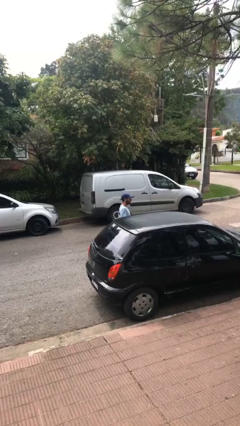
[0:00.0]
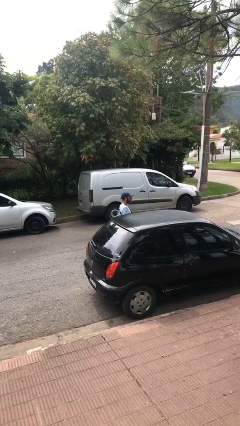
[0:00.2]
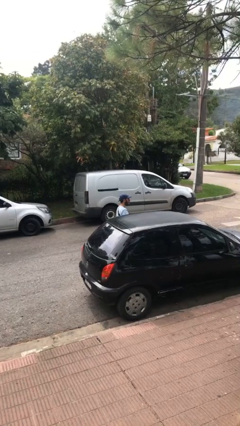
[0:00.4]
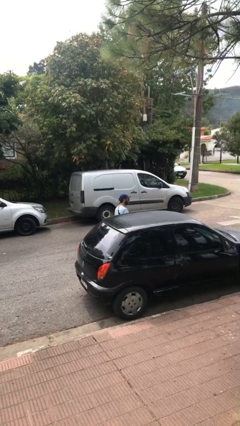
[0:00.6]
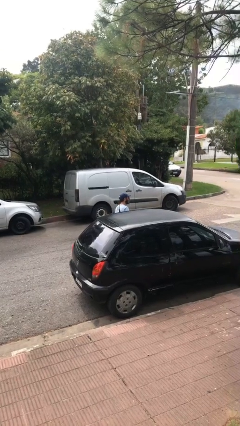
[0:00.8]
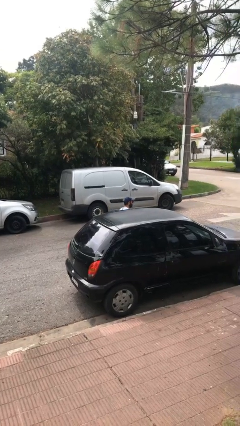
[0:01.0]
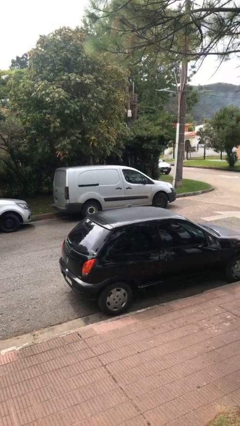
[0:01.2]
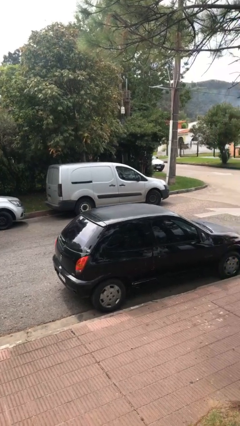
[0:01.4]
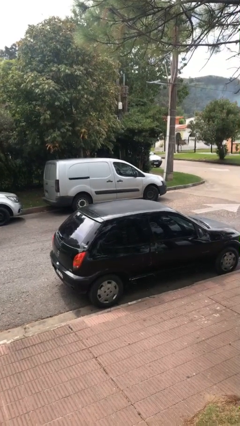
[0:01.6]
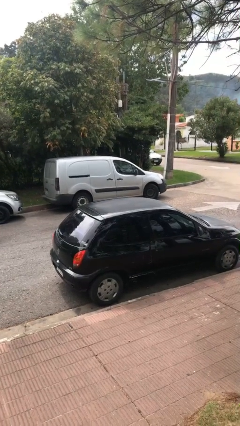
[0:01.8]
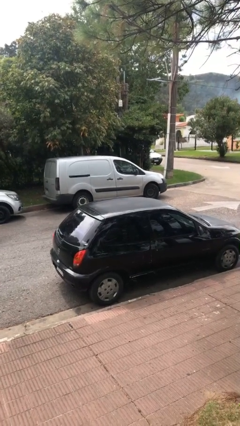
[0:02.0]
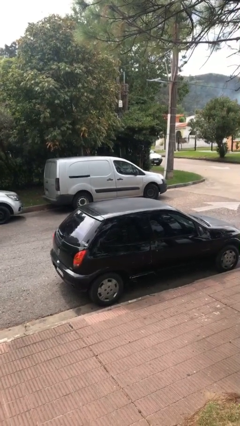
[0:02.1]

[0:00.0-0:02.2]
person enters car

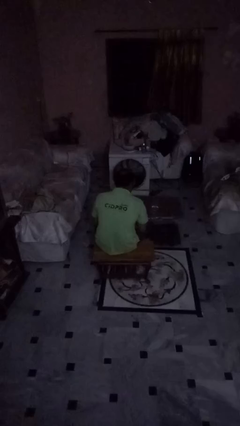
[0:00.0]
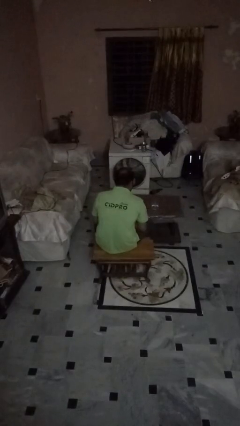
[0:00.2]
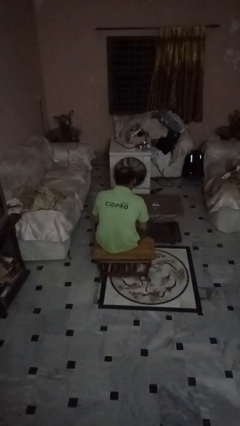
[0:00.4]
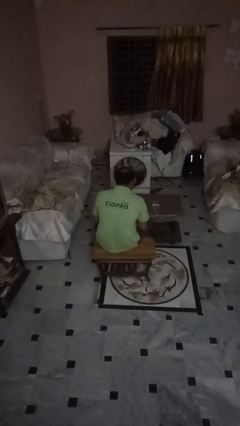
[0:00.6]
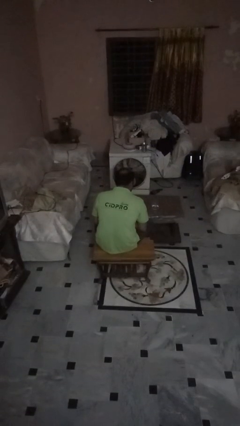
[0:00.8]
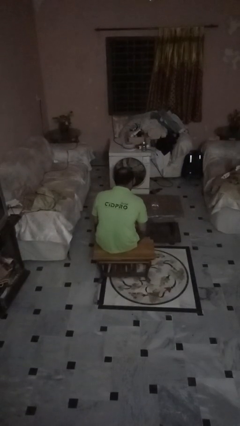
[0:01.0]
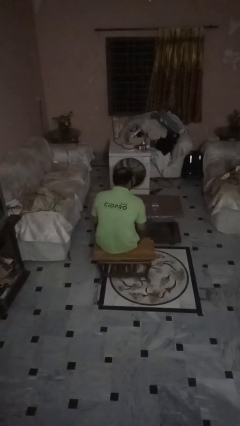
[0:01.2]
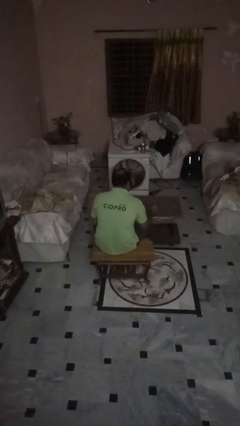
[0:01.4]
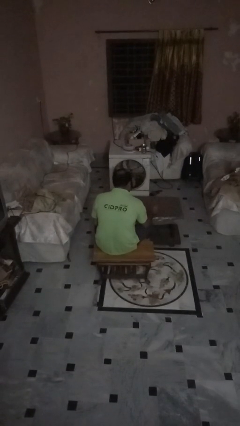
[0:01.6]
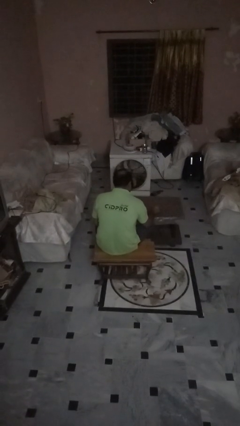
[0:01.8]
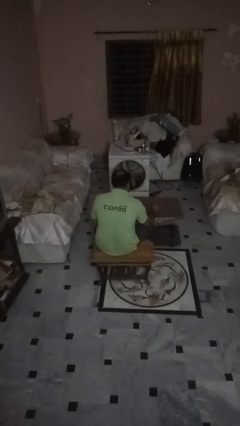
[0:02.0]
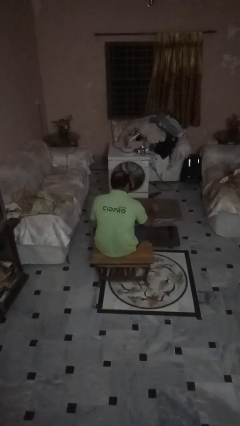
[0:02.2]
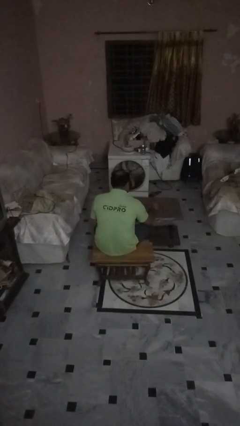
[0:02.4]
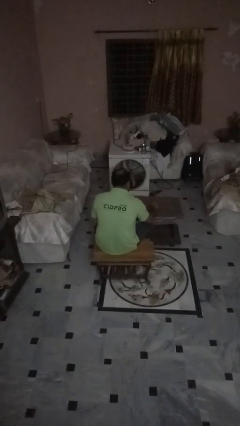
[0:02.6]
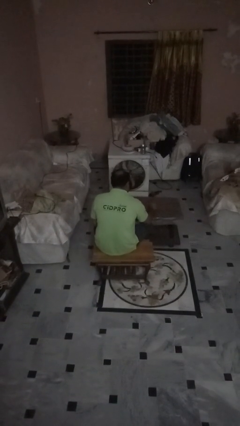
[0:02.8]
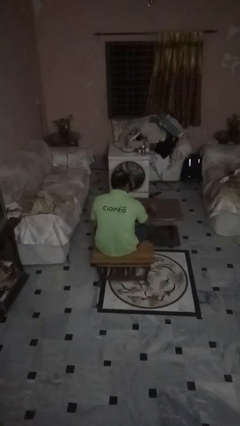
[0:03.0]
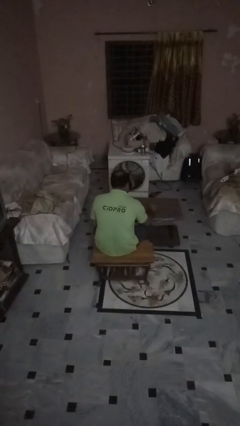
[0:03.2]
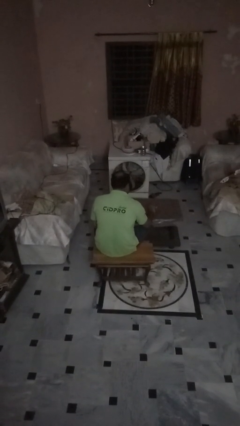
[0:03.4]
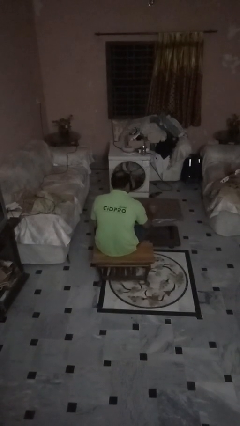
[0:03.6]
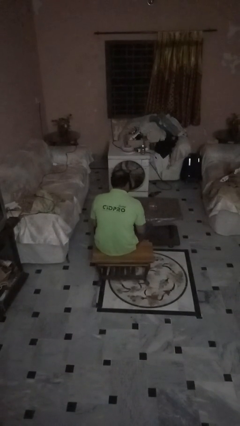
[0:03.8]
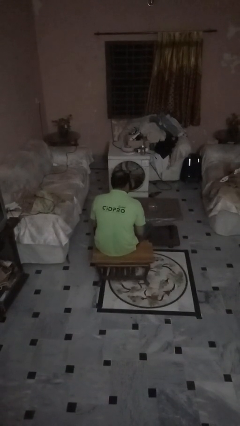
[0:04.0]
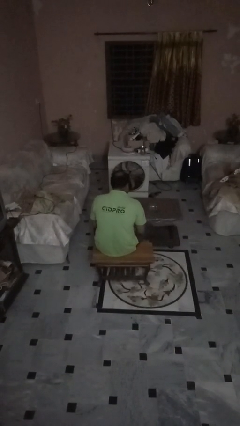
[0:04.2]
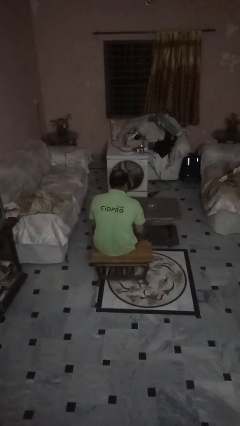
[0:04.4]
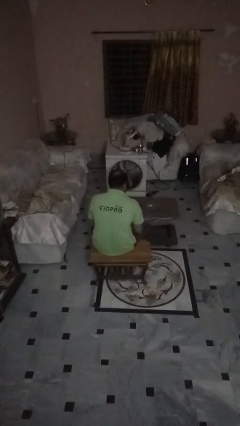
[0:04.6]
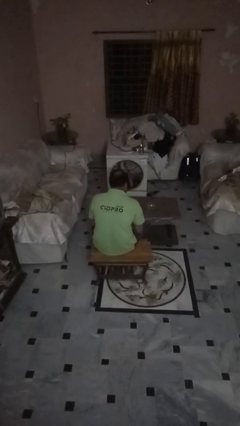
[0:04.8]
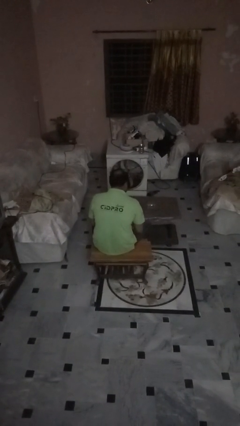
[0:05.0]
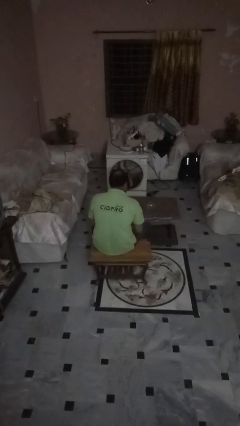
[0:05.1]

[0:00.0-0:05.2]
person spills on table

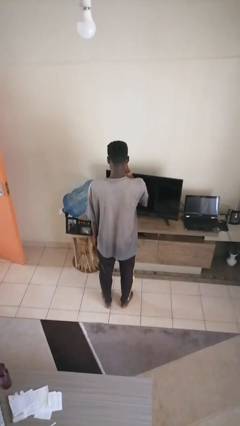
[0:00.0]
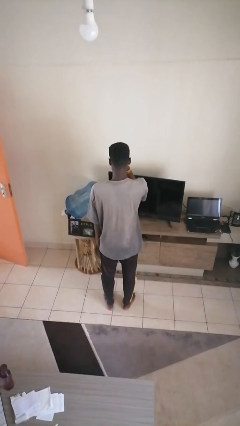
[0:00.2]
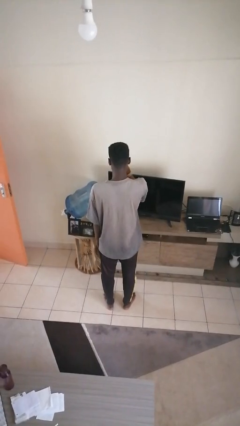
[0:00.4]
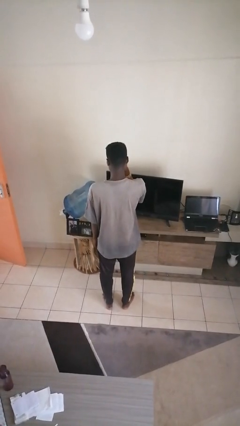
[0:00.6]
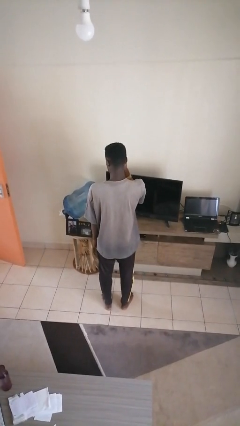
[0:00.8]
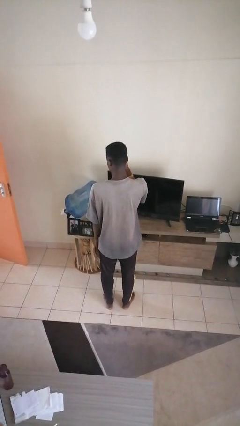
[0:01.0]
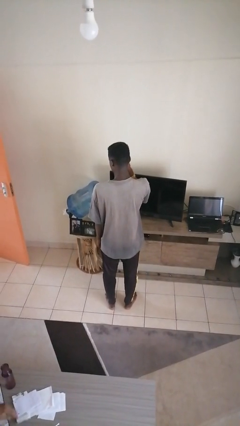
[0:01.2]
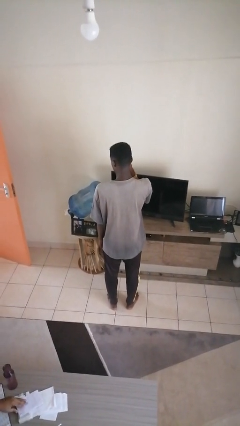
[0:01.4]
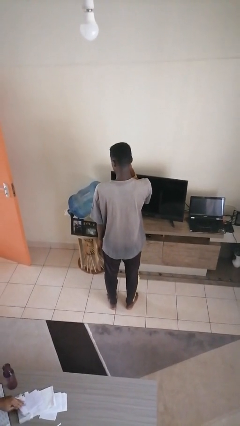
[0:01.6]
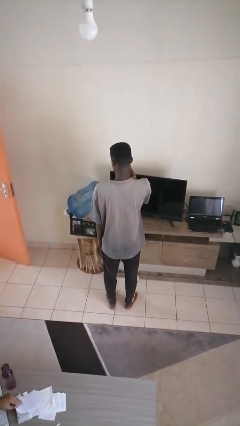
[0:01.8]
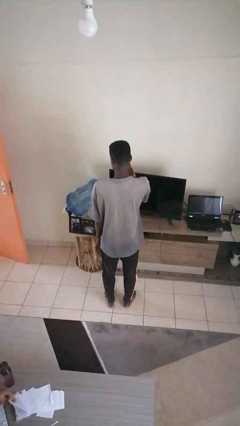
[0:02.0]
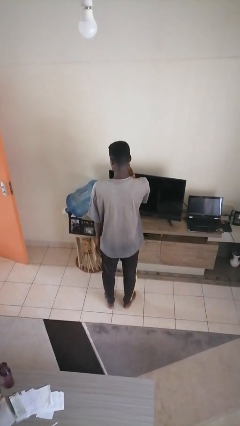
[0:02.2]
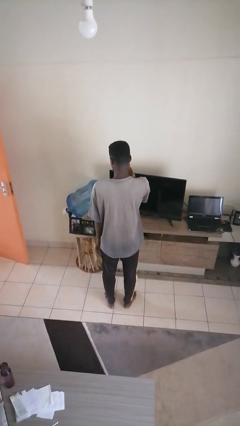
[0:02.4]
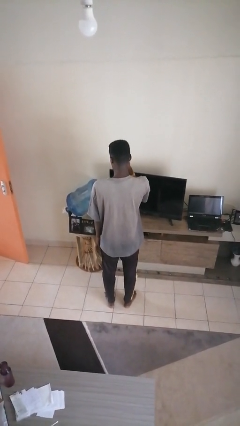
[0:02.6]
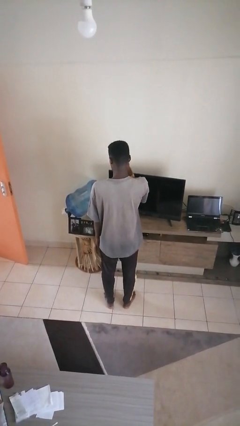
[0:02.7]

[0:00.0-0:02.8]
person scratches face

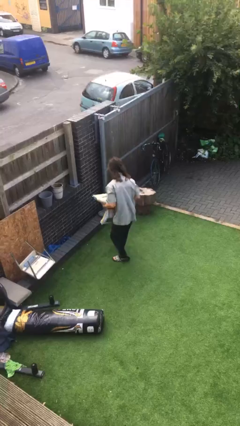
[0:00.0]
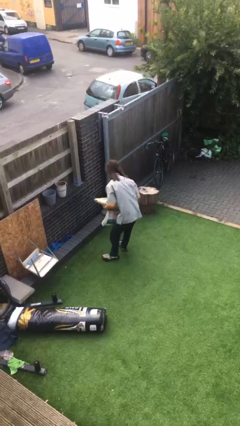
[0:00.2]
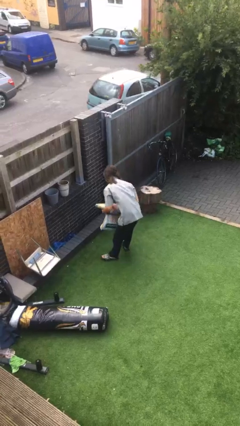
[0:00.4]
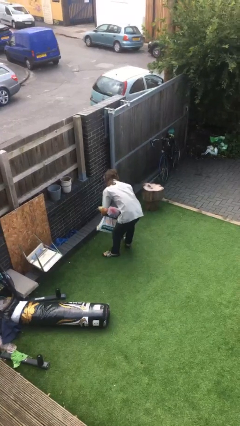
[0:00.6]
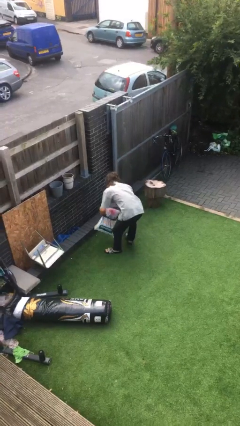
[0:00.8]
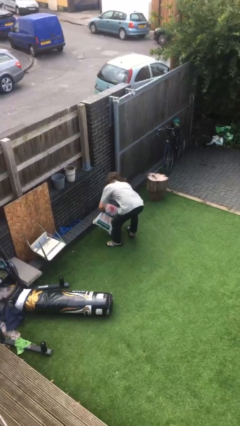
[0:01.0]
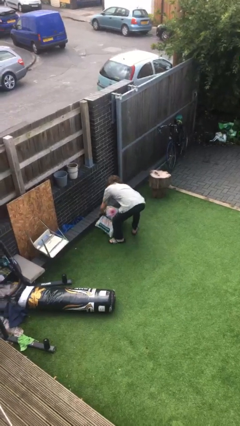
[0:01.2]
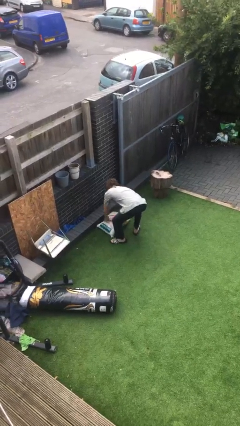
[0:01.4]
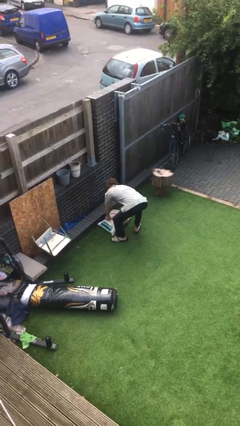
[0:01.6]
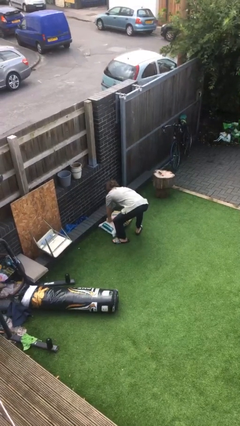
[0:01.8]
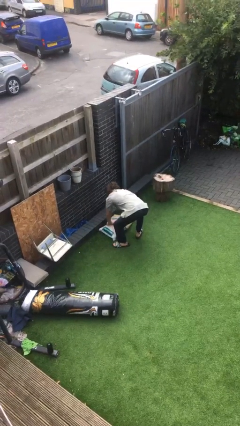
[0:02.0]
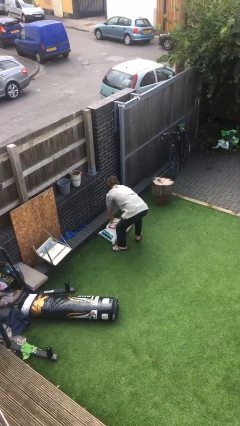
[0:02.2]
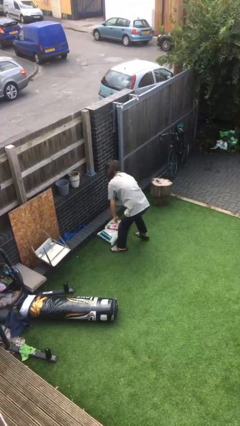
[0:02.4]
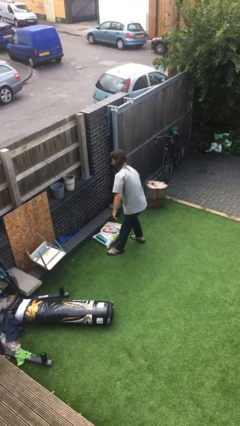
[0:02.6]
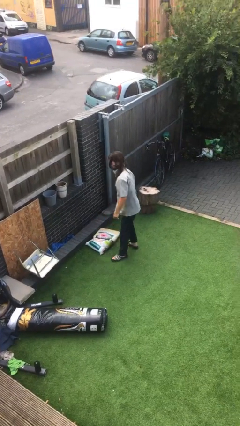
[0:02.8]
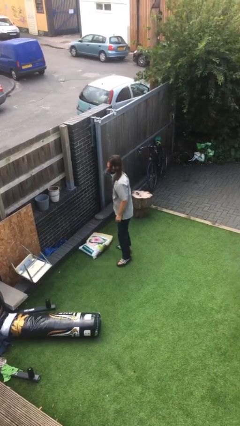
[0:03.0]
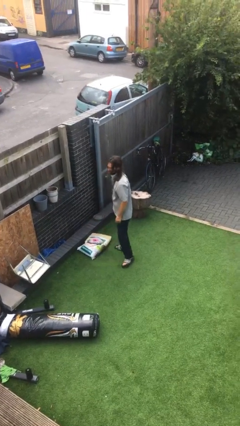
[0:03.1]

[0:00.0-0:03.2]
person puts down object on floor

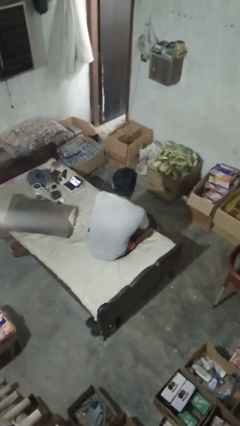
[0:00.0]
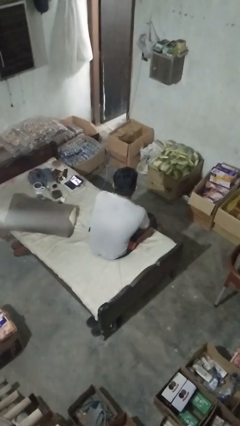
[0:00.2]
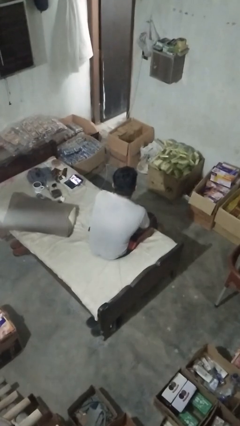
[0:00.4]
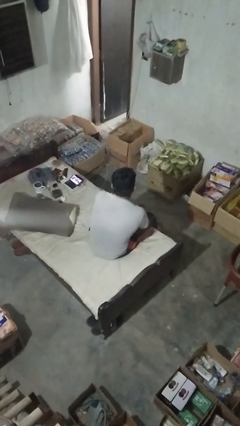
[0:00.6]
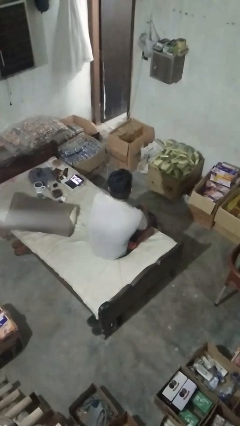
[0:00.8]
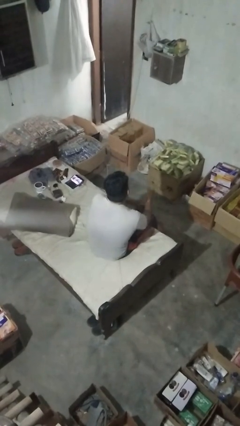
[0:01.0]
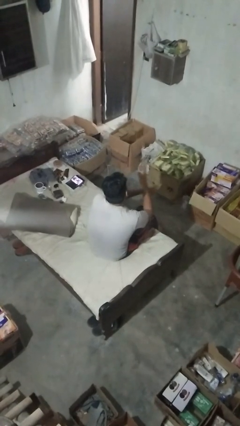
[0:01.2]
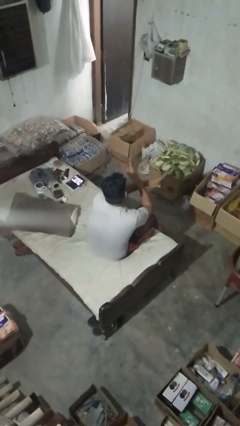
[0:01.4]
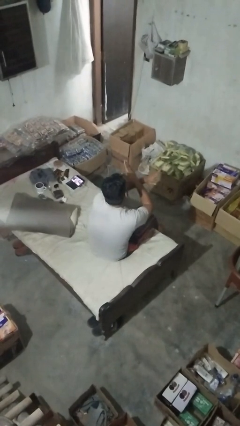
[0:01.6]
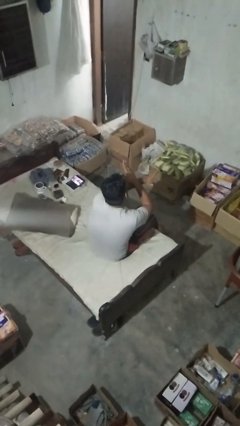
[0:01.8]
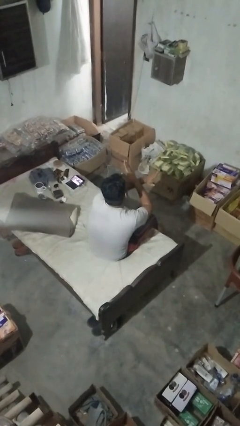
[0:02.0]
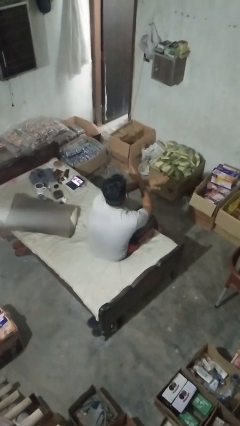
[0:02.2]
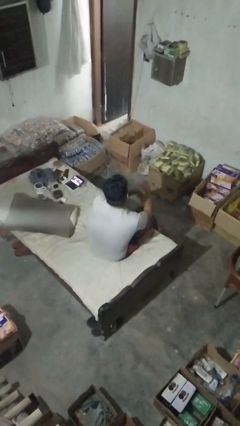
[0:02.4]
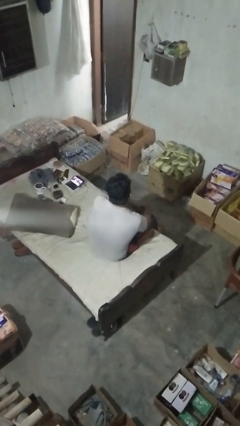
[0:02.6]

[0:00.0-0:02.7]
person gestures arms x

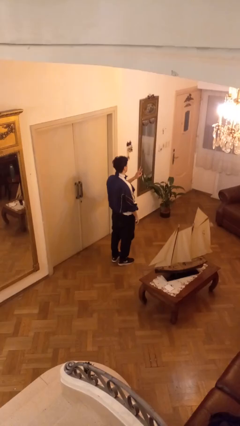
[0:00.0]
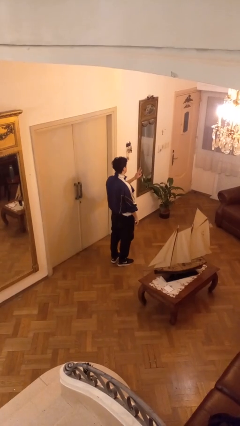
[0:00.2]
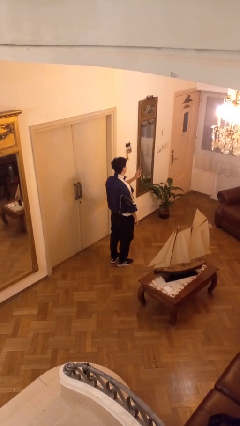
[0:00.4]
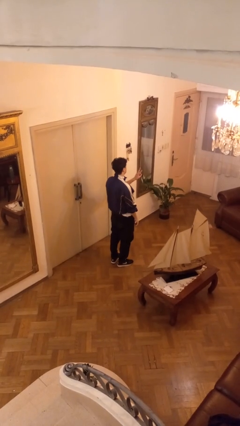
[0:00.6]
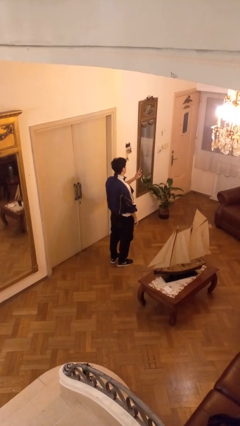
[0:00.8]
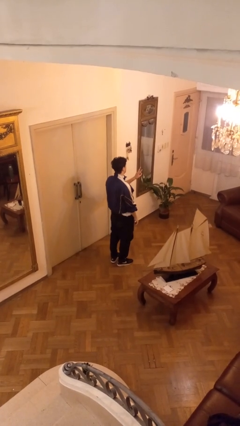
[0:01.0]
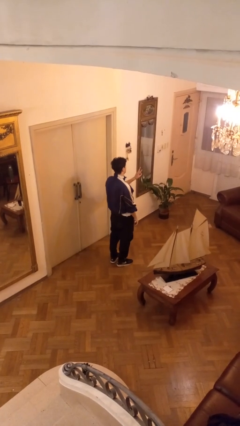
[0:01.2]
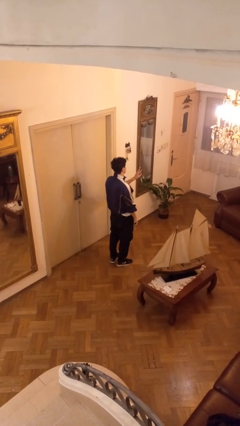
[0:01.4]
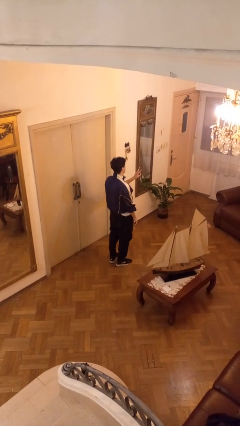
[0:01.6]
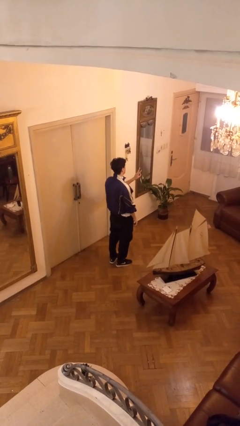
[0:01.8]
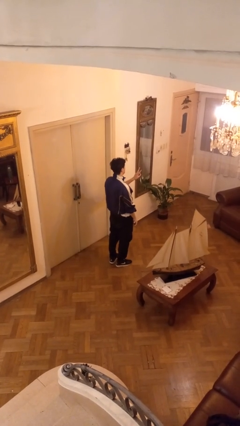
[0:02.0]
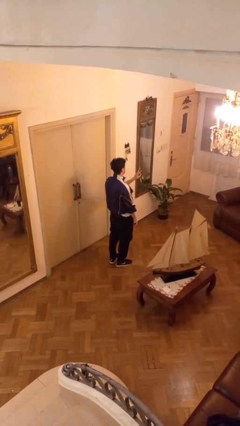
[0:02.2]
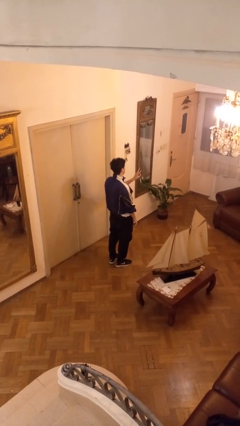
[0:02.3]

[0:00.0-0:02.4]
person gestures peace
